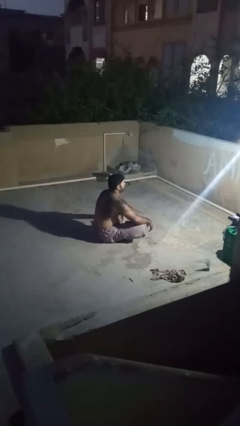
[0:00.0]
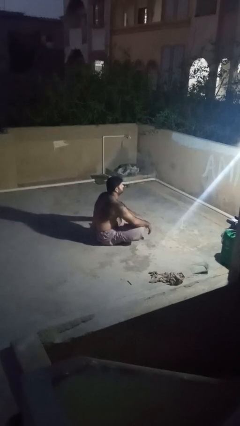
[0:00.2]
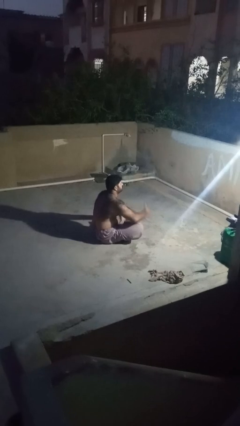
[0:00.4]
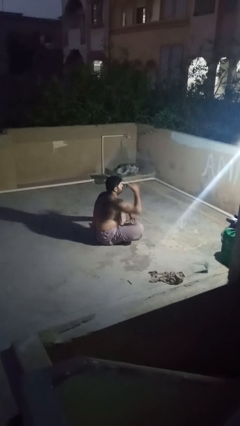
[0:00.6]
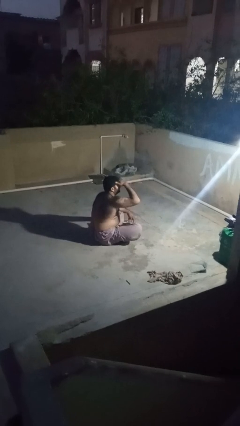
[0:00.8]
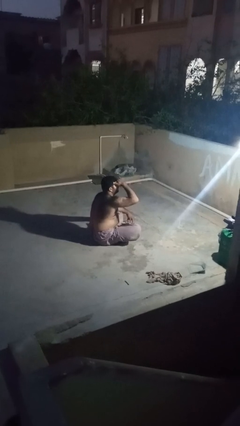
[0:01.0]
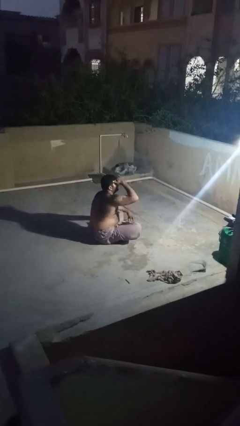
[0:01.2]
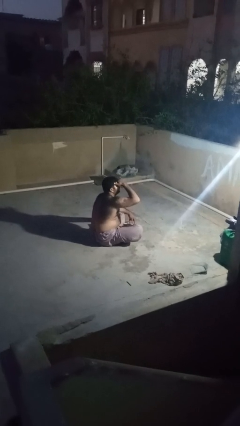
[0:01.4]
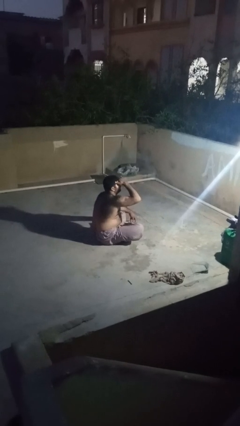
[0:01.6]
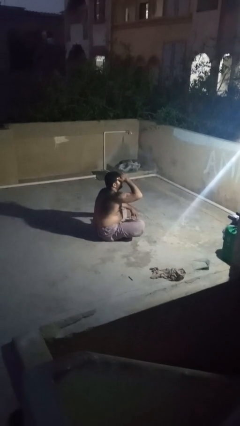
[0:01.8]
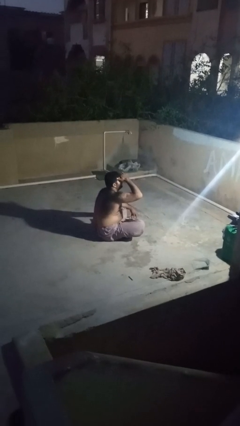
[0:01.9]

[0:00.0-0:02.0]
person shades eyes

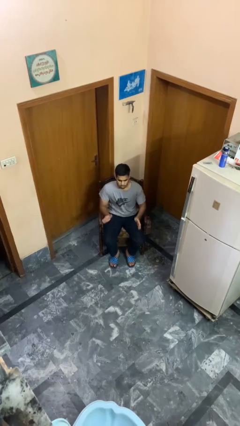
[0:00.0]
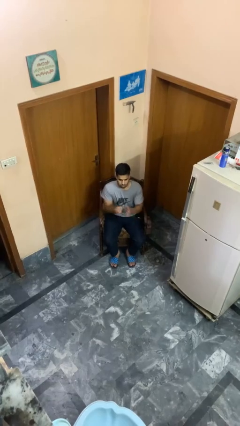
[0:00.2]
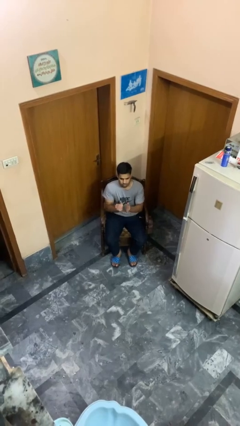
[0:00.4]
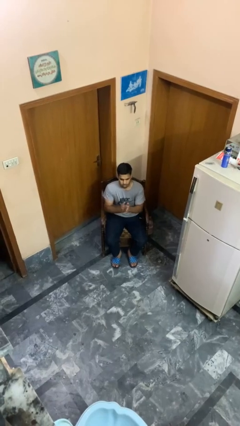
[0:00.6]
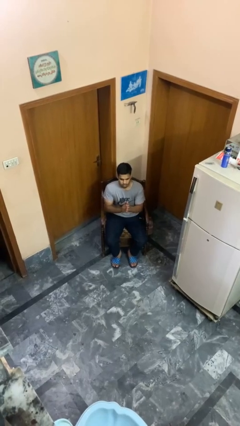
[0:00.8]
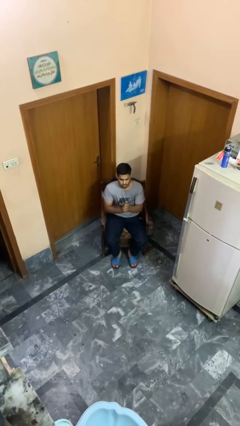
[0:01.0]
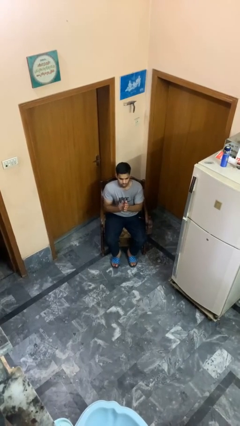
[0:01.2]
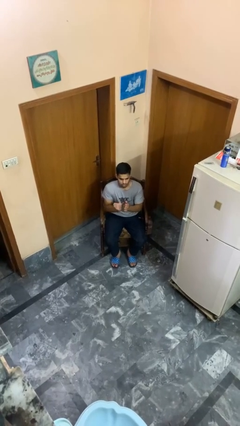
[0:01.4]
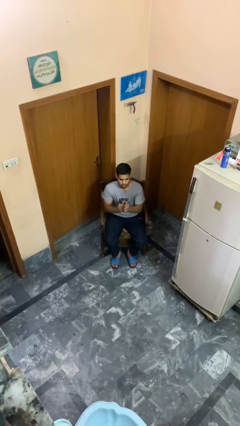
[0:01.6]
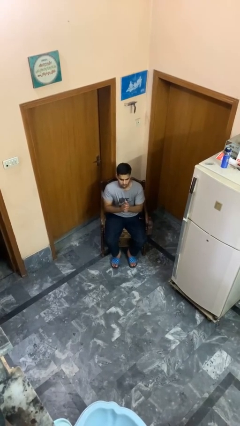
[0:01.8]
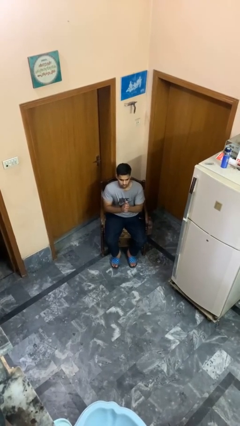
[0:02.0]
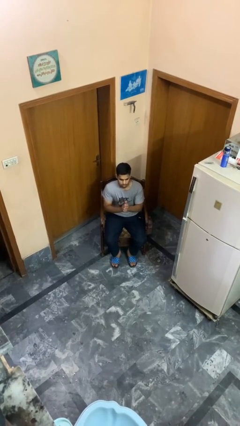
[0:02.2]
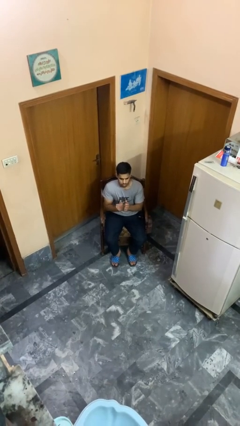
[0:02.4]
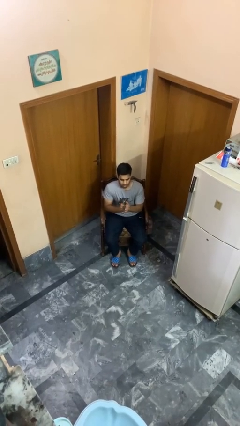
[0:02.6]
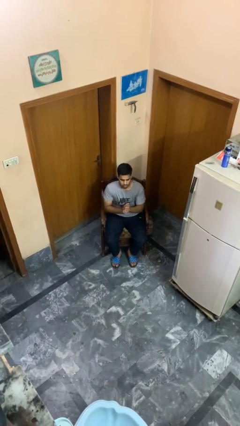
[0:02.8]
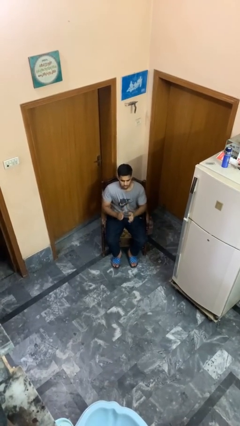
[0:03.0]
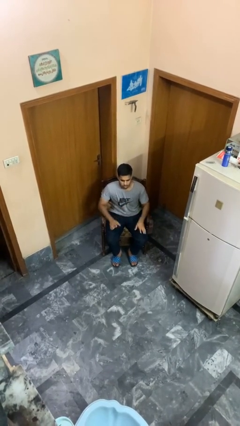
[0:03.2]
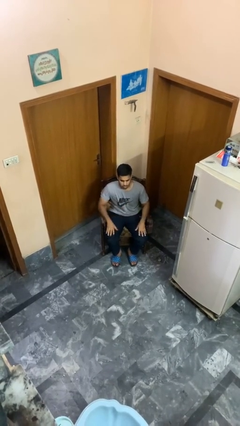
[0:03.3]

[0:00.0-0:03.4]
person claps hands

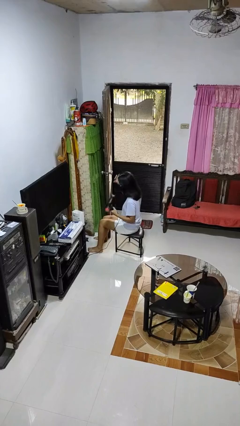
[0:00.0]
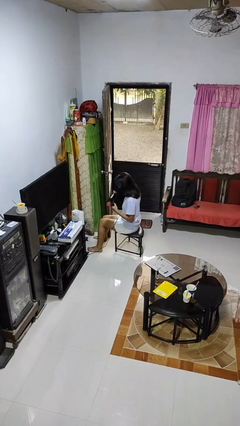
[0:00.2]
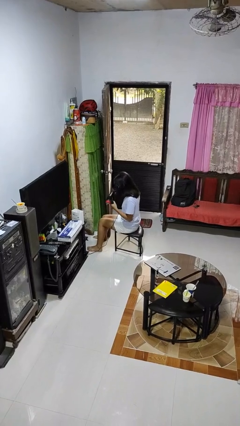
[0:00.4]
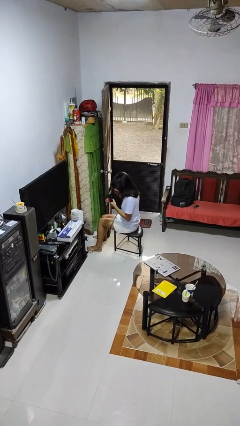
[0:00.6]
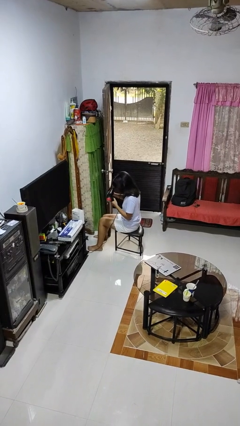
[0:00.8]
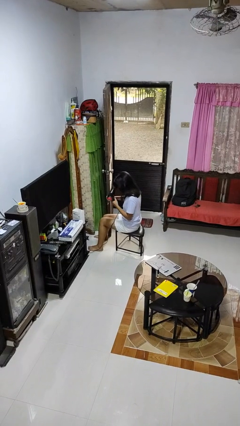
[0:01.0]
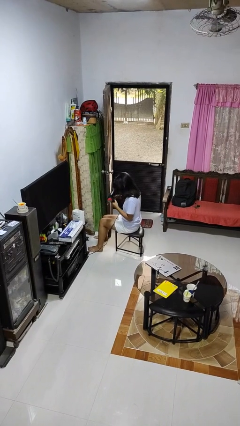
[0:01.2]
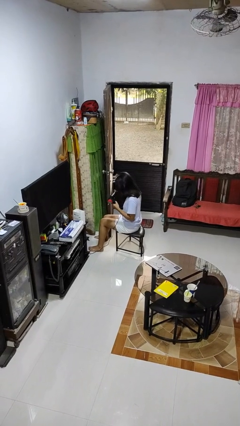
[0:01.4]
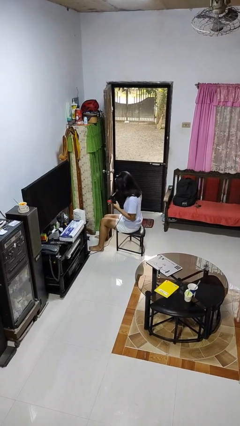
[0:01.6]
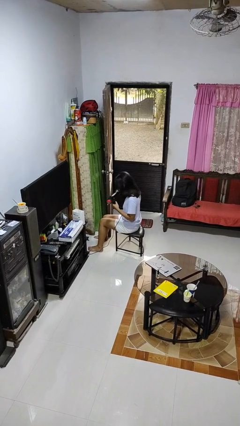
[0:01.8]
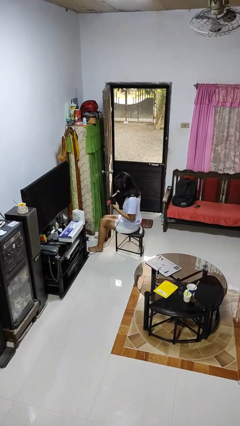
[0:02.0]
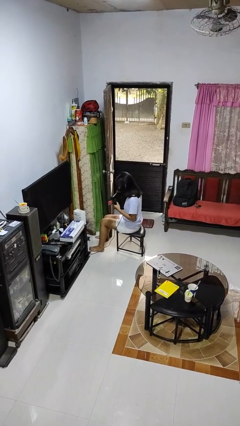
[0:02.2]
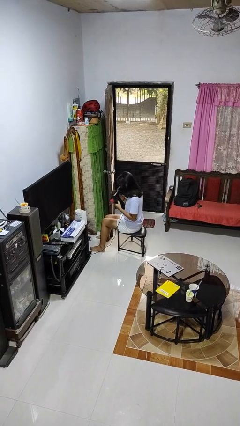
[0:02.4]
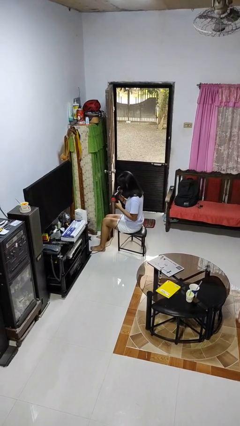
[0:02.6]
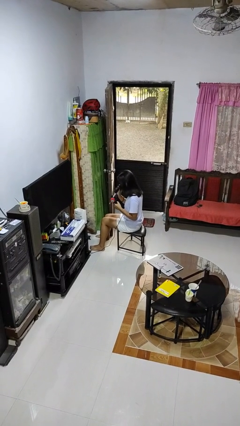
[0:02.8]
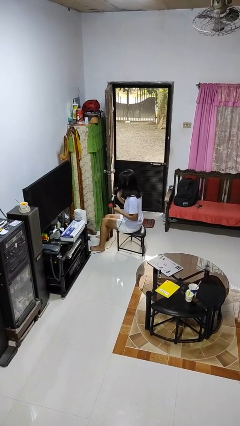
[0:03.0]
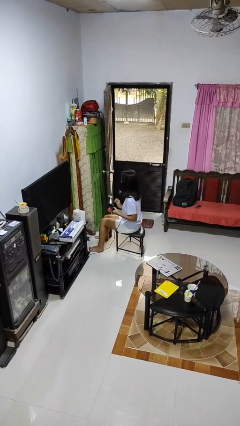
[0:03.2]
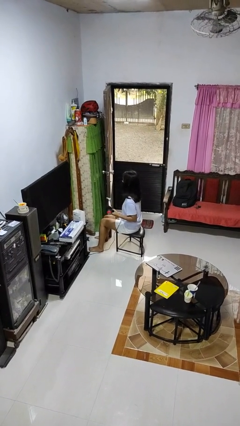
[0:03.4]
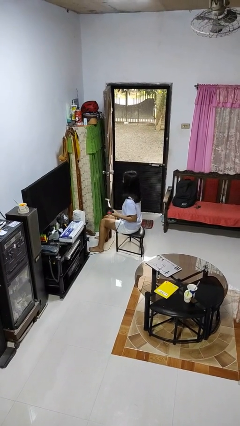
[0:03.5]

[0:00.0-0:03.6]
person dries hair with hairdryer

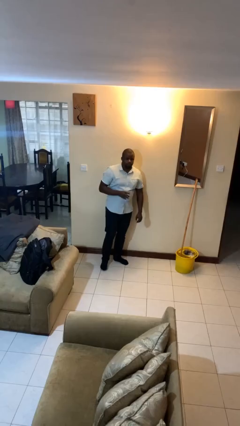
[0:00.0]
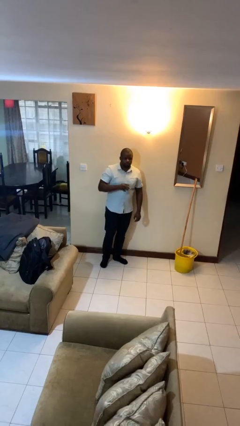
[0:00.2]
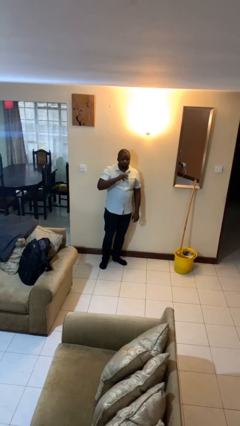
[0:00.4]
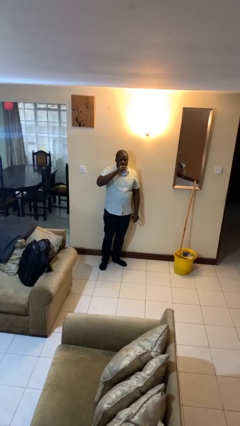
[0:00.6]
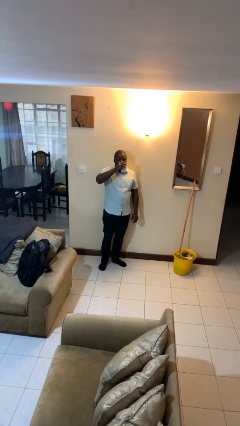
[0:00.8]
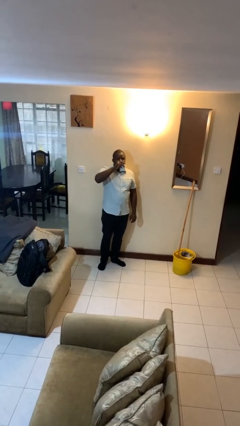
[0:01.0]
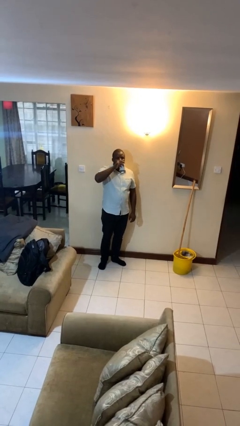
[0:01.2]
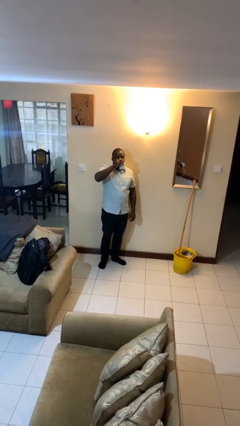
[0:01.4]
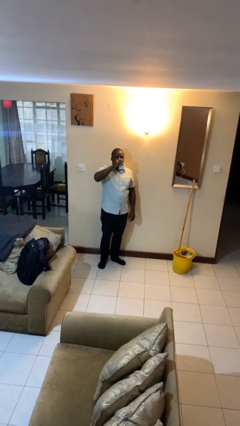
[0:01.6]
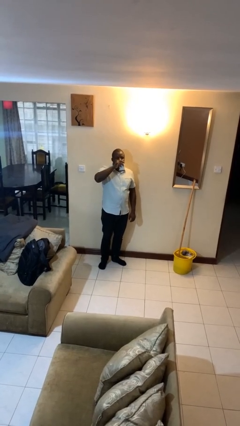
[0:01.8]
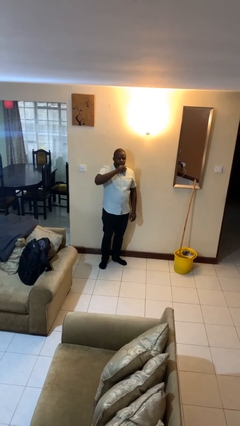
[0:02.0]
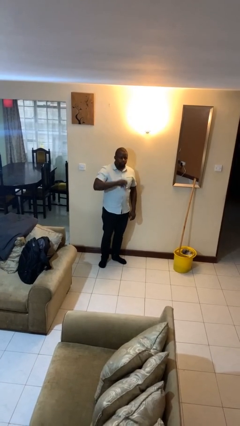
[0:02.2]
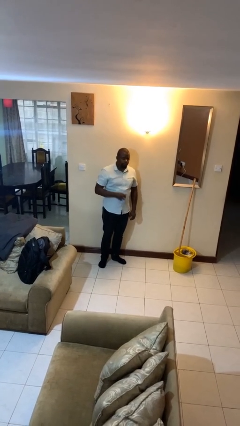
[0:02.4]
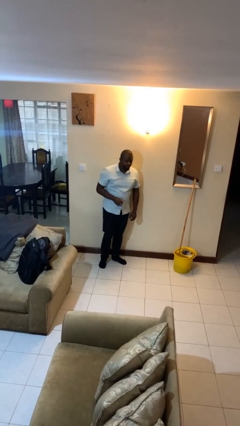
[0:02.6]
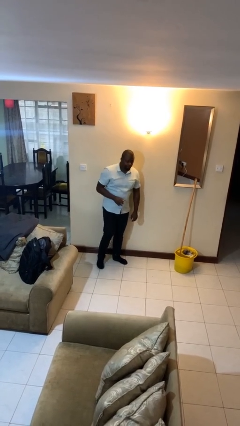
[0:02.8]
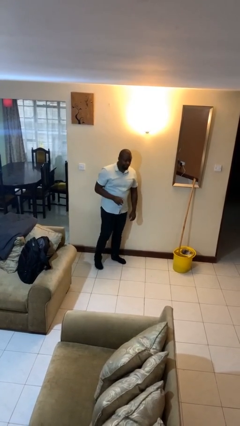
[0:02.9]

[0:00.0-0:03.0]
person drinks from beverage can

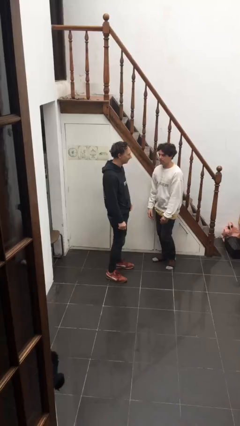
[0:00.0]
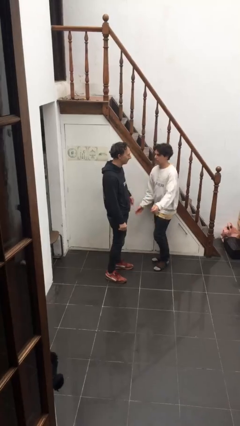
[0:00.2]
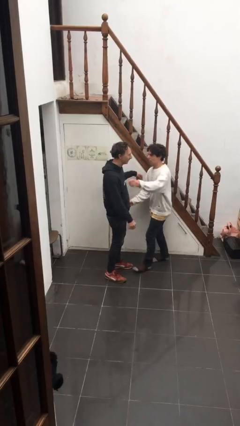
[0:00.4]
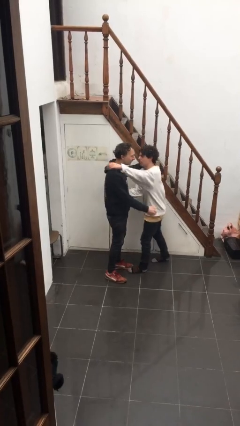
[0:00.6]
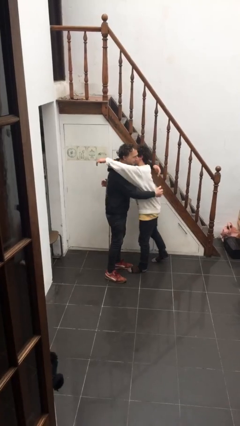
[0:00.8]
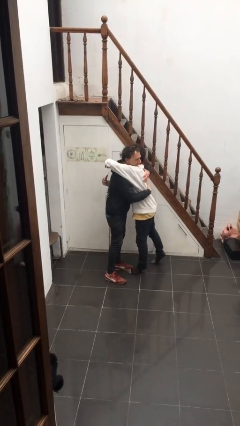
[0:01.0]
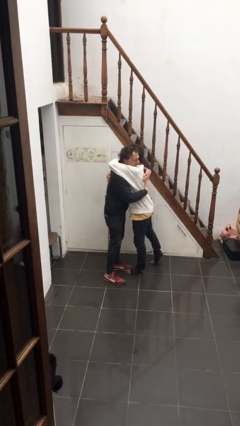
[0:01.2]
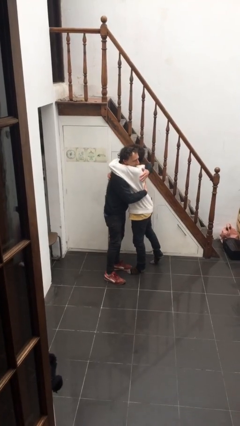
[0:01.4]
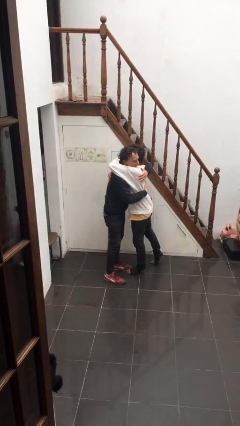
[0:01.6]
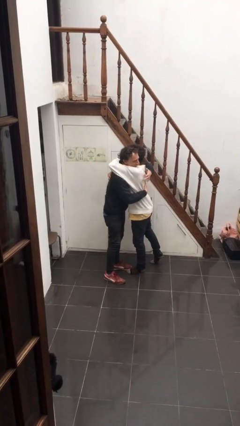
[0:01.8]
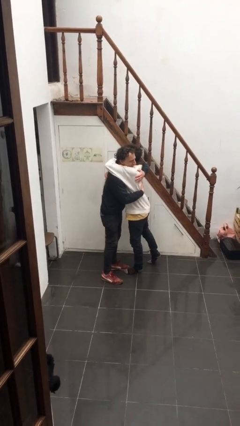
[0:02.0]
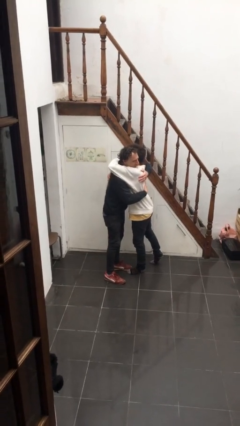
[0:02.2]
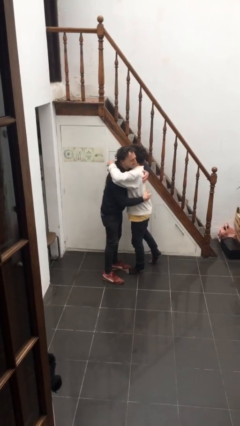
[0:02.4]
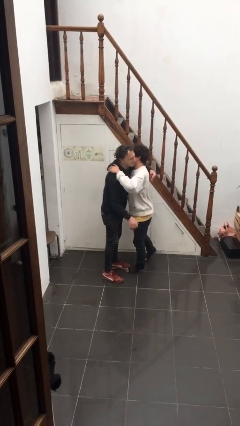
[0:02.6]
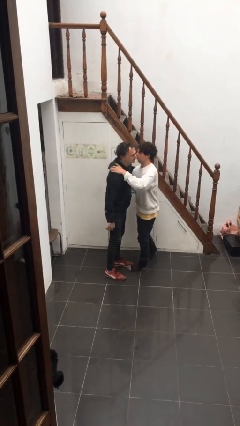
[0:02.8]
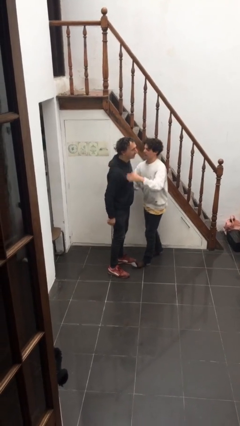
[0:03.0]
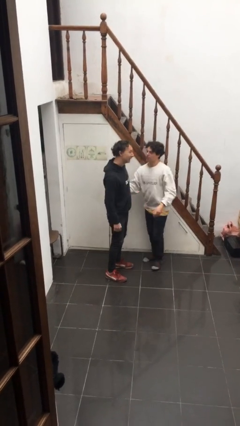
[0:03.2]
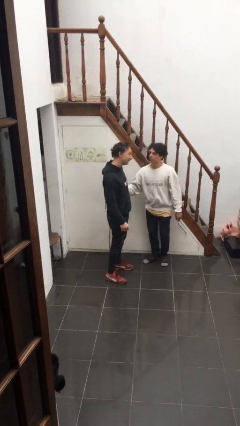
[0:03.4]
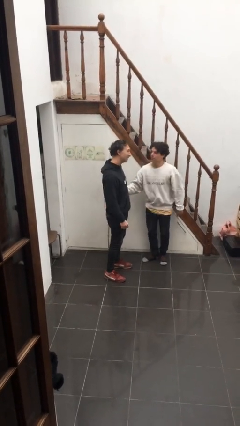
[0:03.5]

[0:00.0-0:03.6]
person embraces person

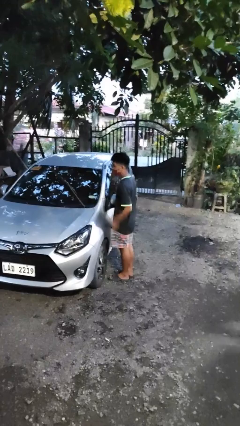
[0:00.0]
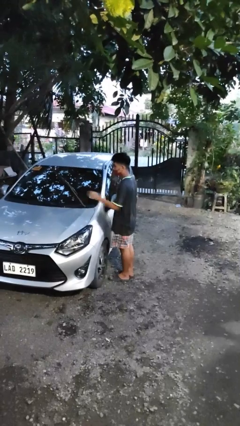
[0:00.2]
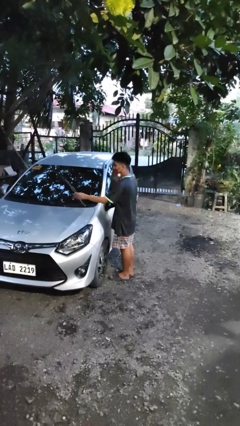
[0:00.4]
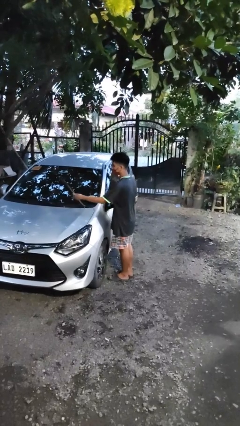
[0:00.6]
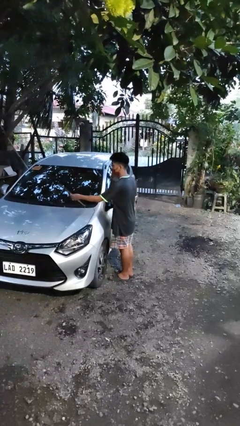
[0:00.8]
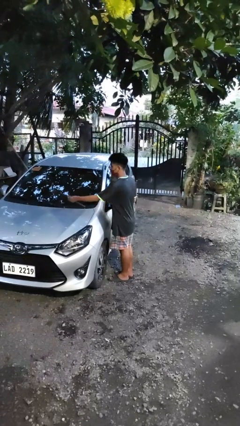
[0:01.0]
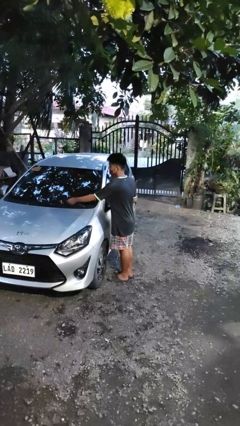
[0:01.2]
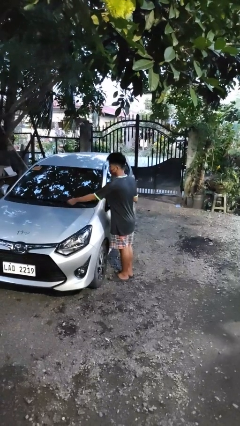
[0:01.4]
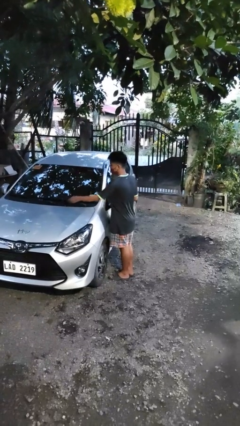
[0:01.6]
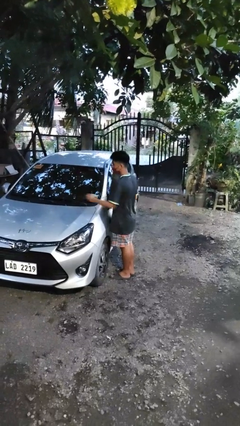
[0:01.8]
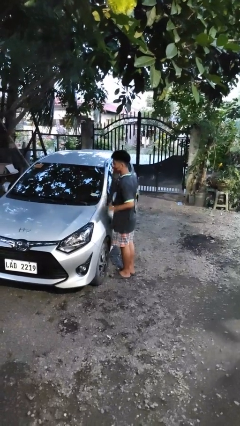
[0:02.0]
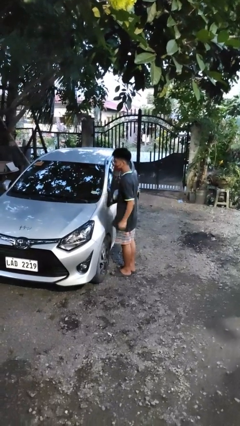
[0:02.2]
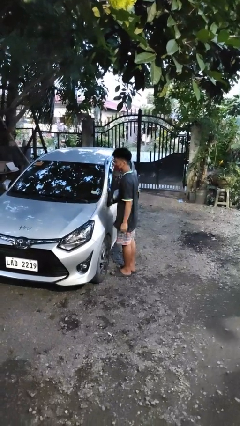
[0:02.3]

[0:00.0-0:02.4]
person flips down car wipers
